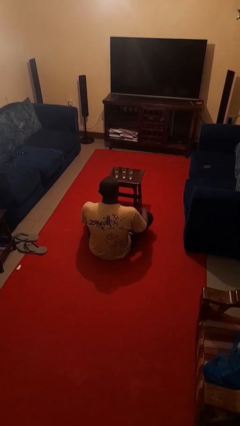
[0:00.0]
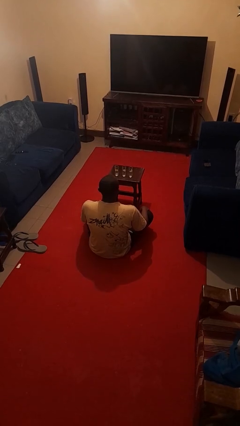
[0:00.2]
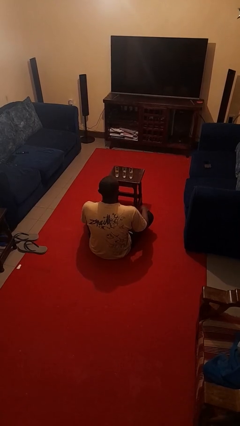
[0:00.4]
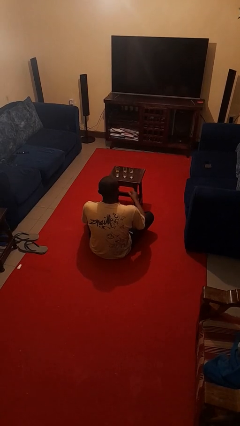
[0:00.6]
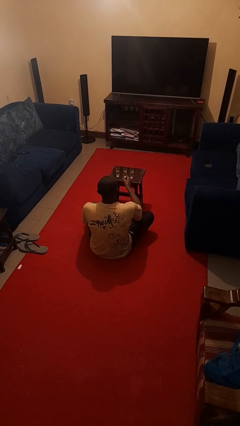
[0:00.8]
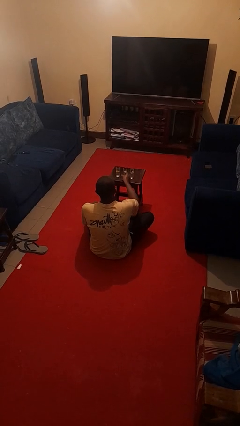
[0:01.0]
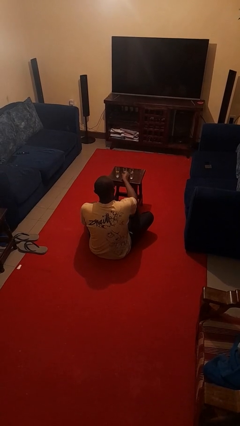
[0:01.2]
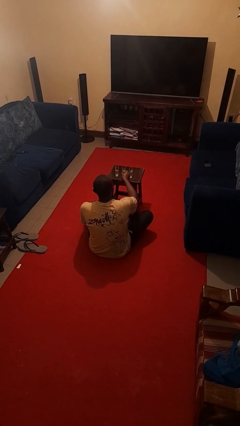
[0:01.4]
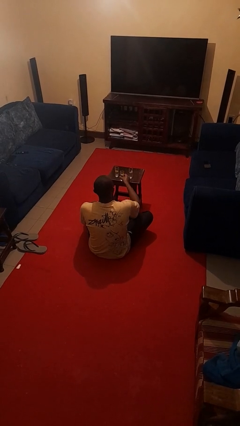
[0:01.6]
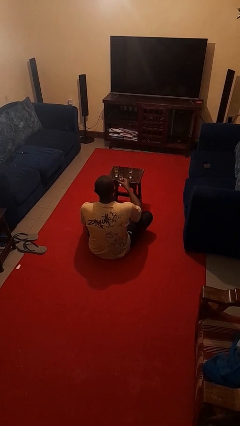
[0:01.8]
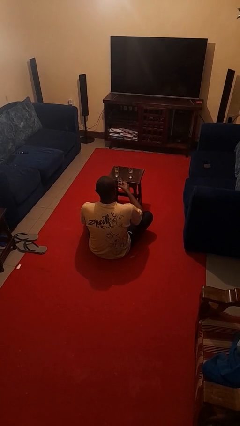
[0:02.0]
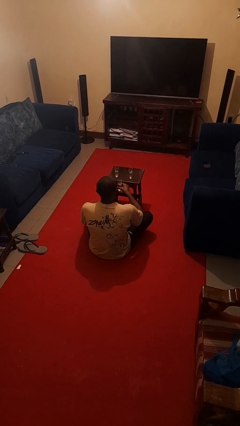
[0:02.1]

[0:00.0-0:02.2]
person picks up object from table

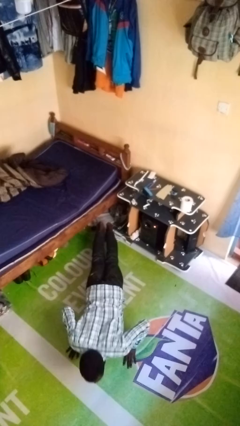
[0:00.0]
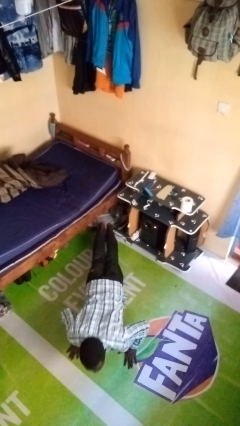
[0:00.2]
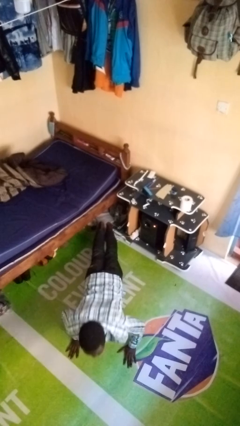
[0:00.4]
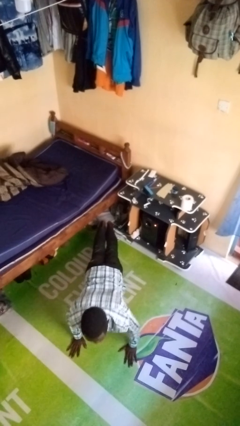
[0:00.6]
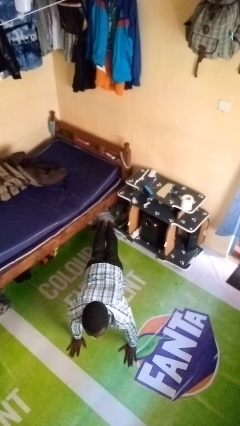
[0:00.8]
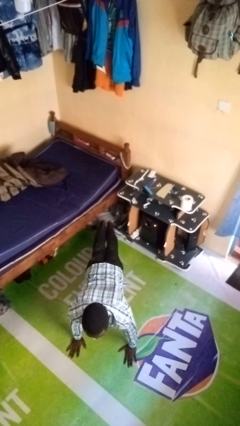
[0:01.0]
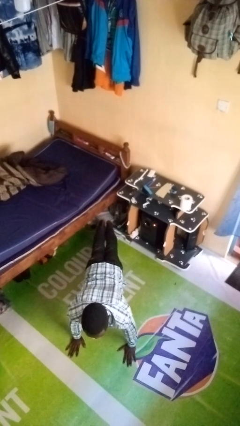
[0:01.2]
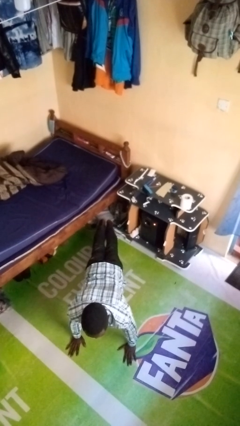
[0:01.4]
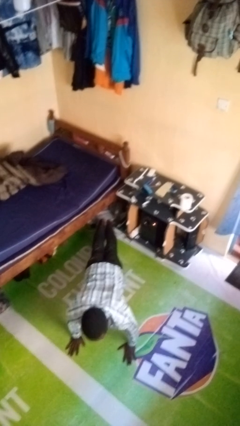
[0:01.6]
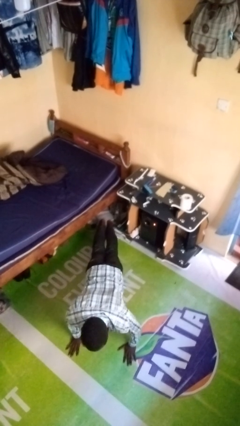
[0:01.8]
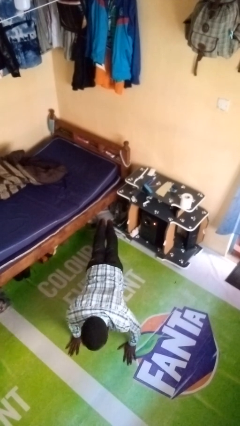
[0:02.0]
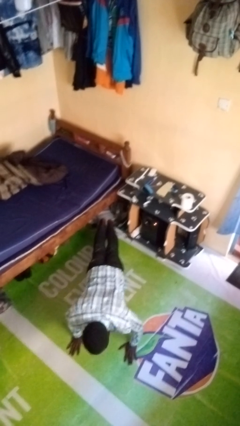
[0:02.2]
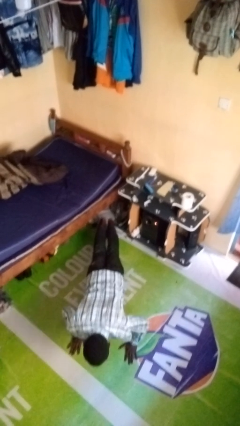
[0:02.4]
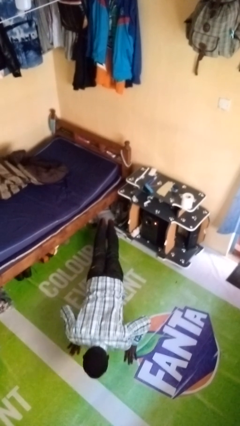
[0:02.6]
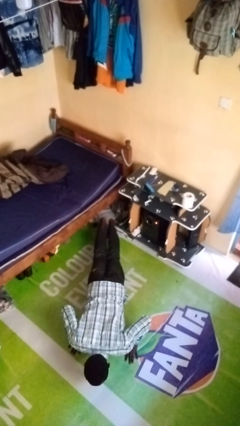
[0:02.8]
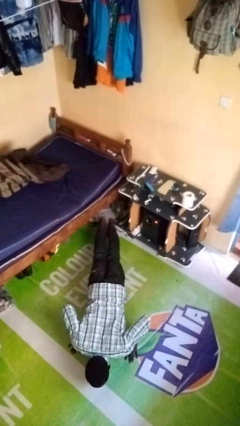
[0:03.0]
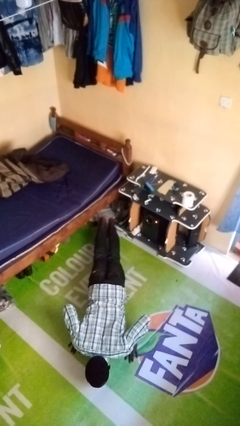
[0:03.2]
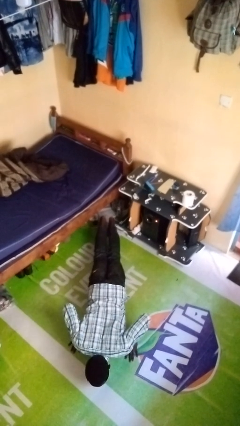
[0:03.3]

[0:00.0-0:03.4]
person exercises with pushup

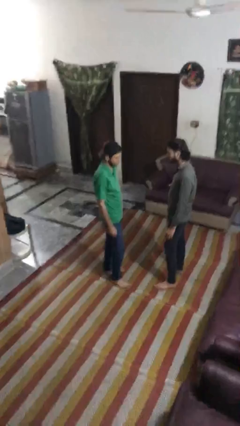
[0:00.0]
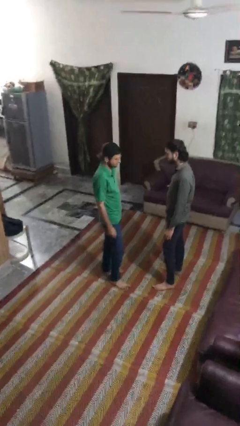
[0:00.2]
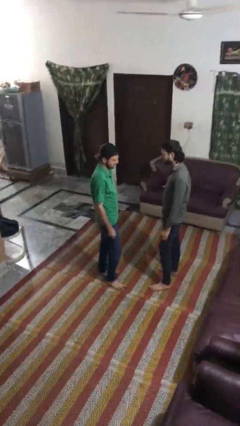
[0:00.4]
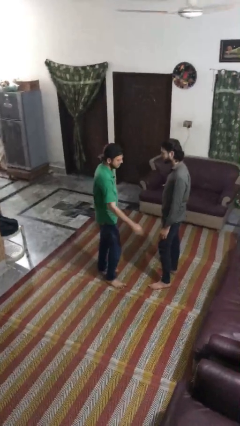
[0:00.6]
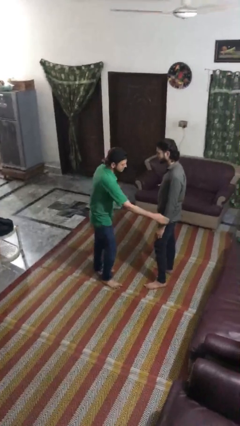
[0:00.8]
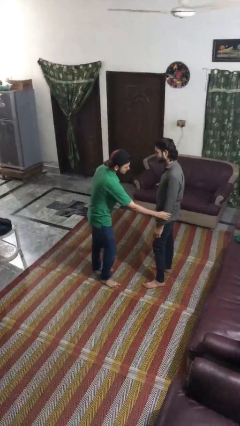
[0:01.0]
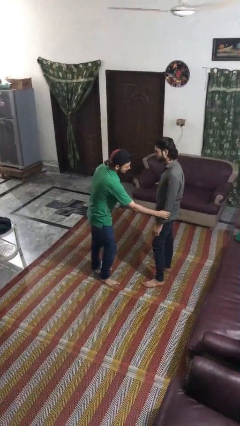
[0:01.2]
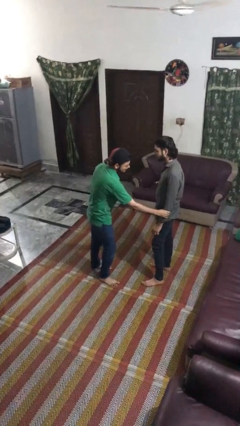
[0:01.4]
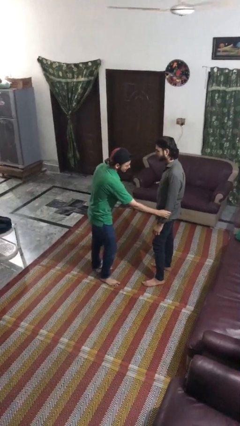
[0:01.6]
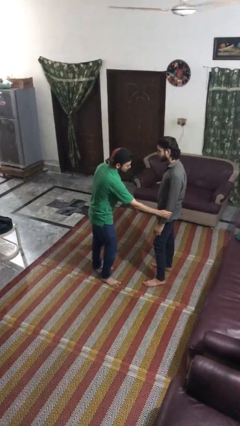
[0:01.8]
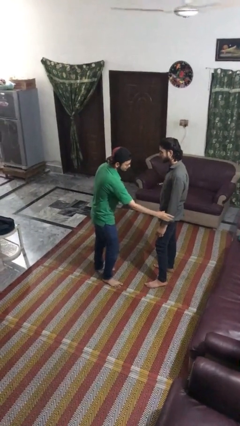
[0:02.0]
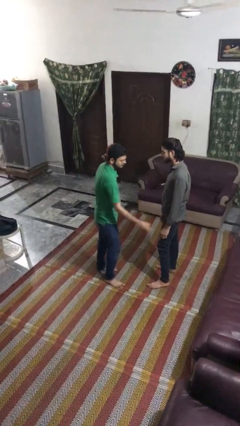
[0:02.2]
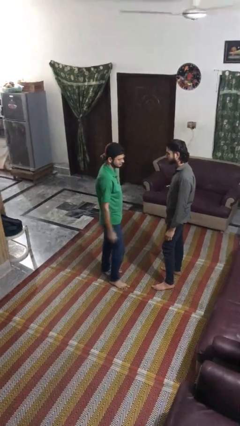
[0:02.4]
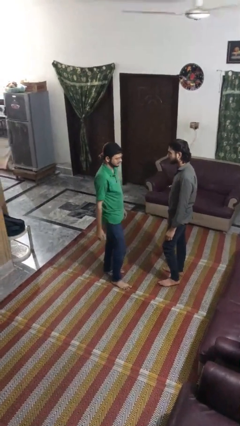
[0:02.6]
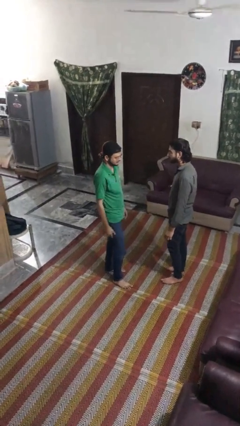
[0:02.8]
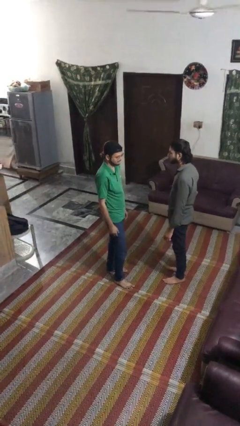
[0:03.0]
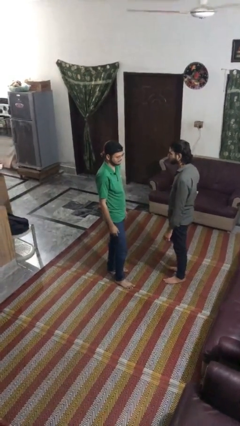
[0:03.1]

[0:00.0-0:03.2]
person grabs person by forearm

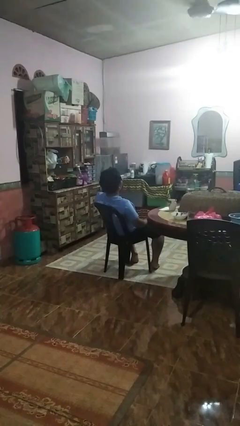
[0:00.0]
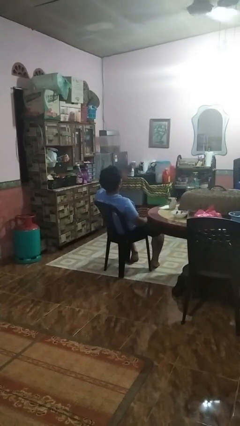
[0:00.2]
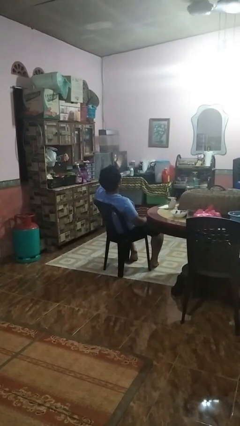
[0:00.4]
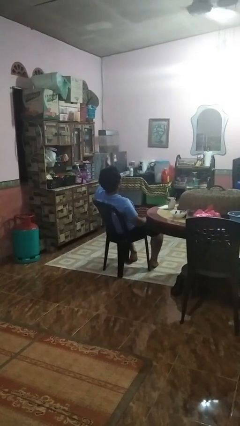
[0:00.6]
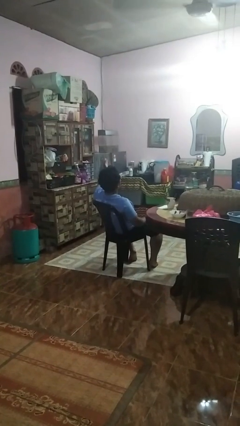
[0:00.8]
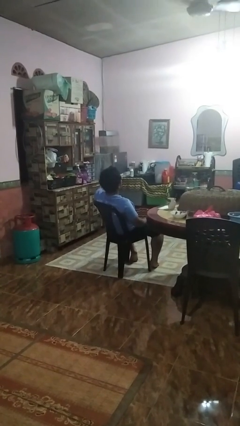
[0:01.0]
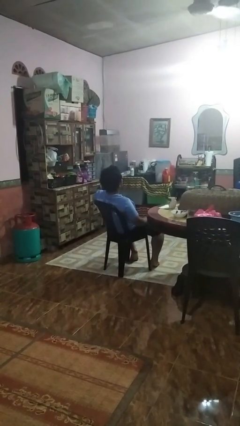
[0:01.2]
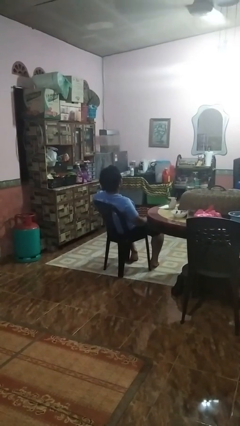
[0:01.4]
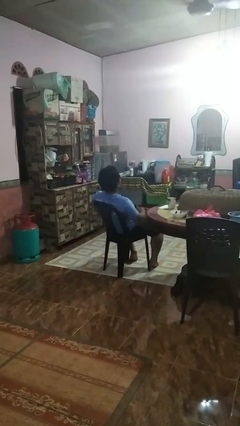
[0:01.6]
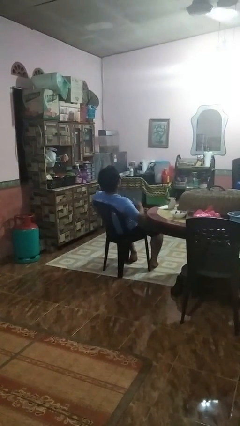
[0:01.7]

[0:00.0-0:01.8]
person gestures blow kiss

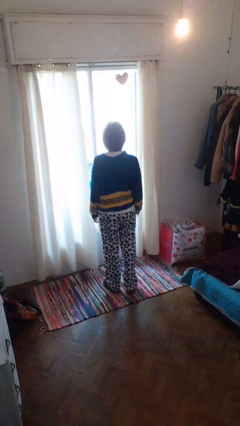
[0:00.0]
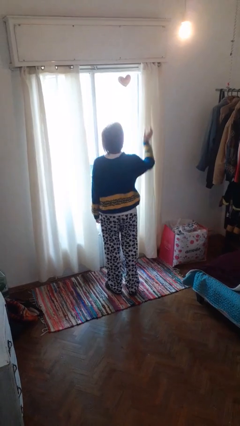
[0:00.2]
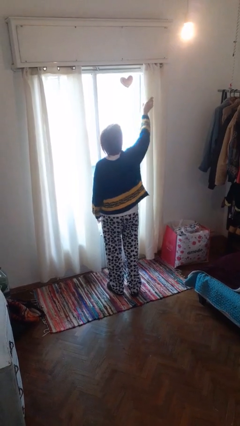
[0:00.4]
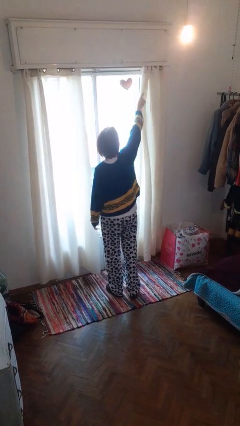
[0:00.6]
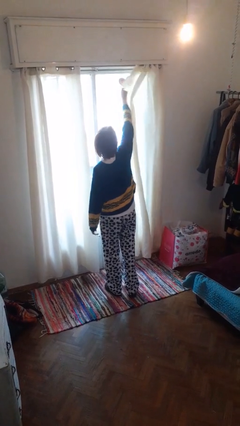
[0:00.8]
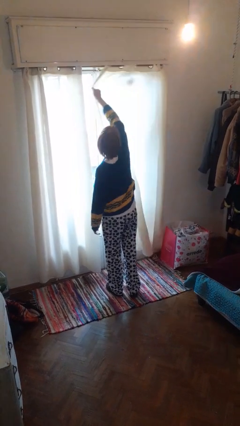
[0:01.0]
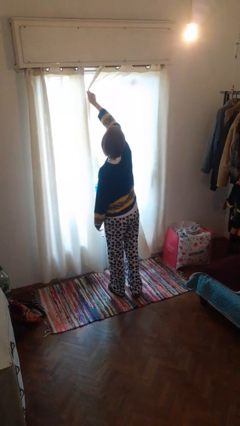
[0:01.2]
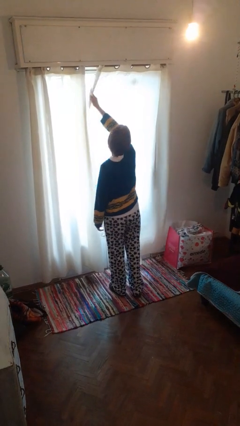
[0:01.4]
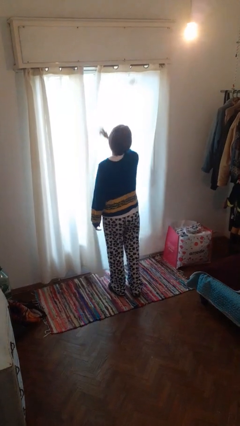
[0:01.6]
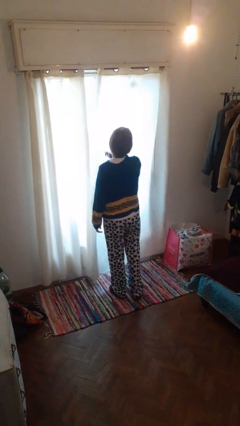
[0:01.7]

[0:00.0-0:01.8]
person closes curtains

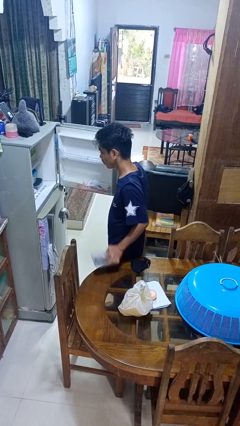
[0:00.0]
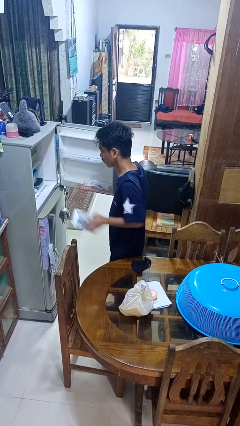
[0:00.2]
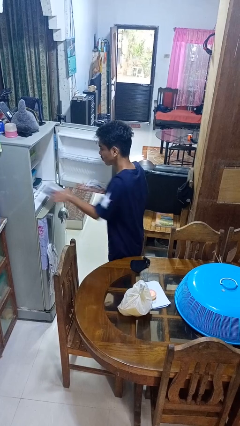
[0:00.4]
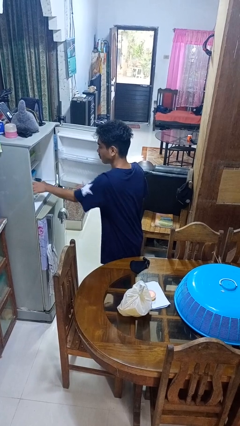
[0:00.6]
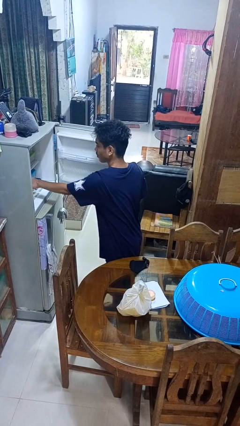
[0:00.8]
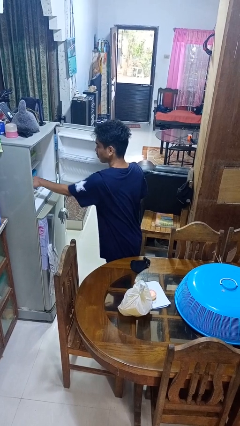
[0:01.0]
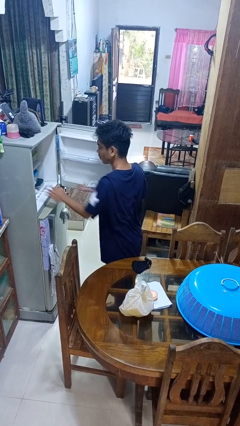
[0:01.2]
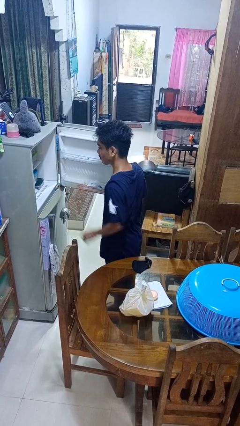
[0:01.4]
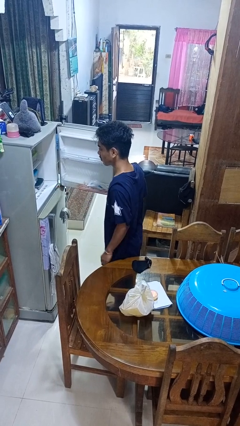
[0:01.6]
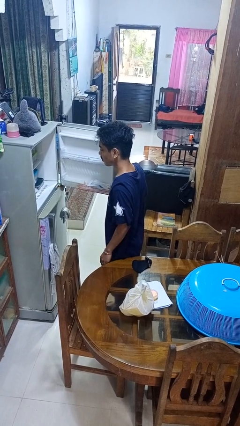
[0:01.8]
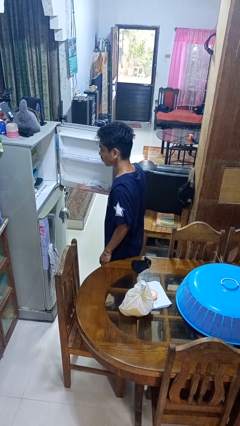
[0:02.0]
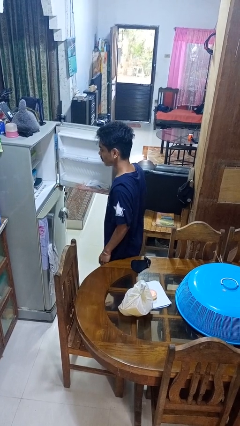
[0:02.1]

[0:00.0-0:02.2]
person puts object into refrigerator

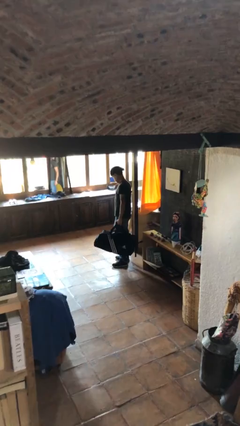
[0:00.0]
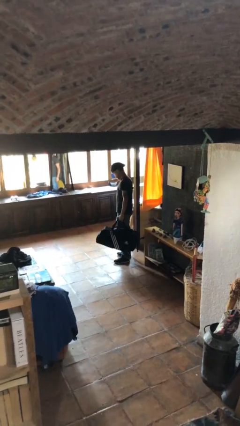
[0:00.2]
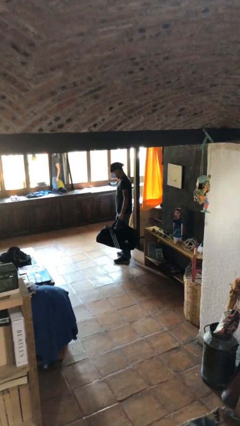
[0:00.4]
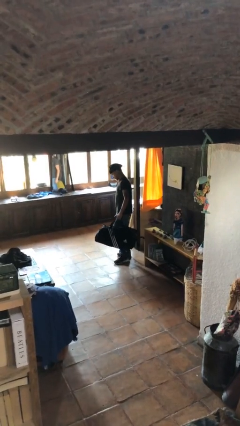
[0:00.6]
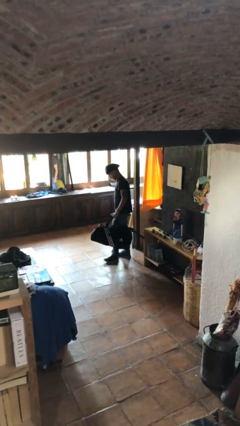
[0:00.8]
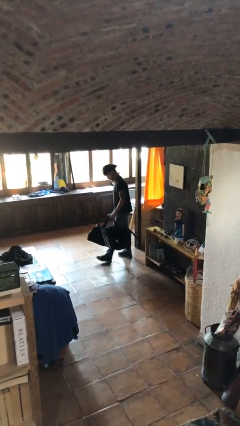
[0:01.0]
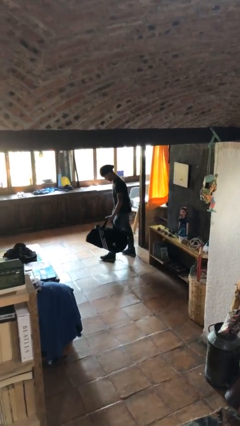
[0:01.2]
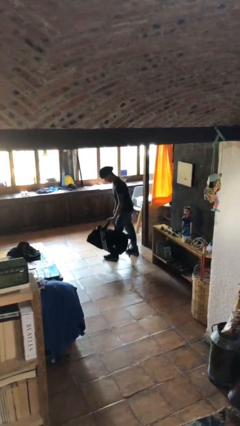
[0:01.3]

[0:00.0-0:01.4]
person puts down object on floor

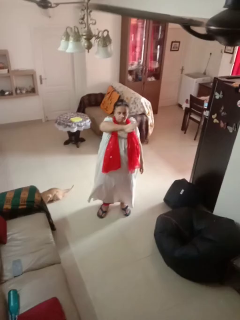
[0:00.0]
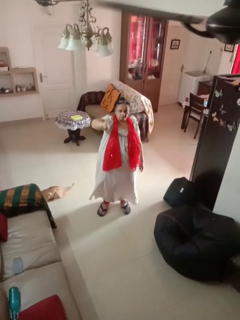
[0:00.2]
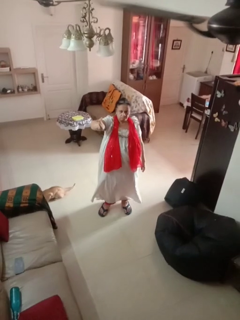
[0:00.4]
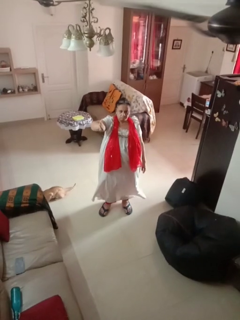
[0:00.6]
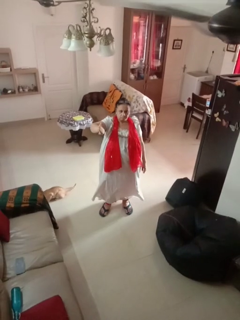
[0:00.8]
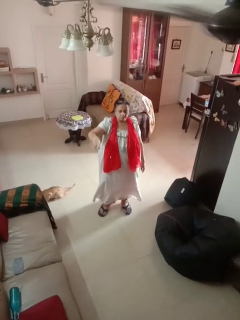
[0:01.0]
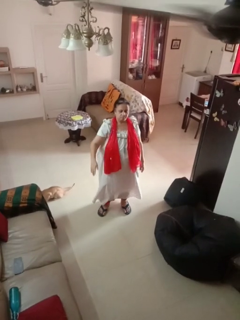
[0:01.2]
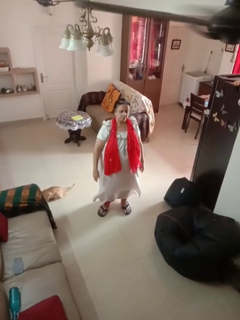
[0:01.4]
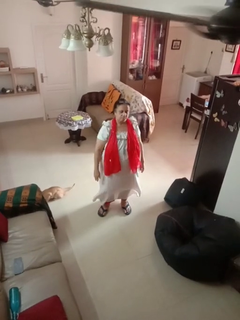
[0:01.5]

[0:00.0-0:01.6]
person gestures swipe right
